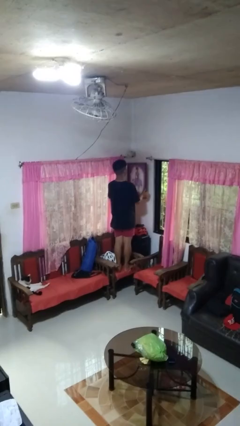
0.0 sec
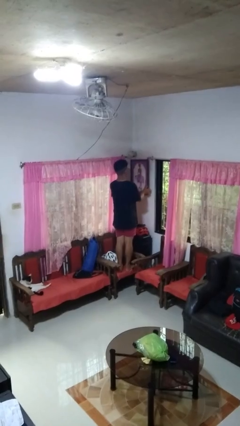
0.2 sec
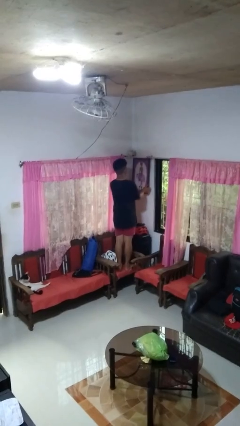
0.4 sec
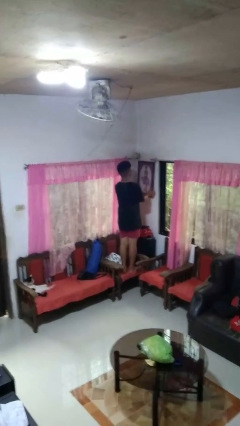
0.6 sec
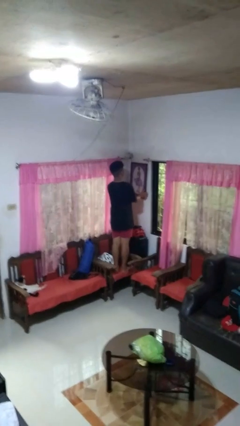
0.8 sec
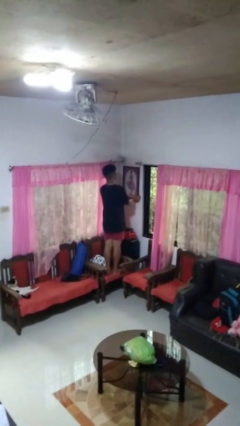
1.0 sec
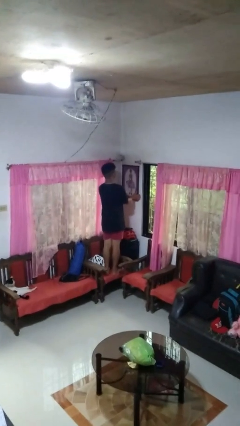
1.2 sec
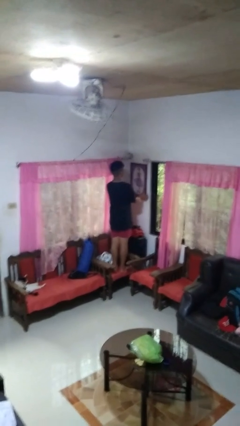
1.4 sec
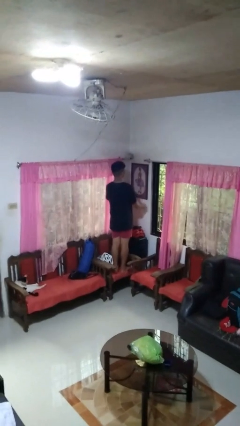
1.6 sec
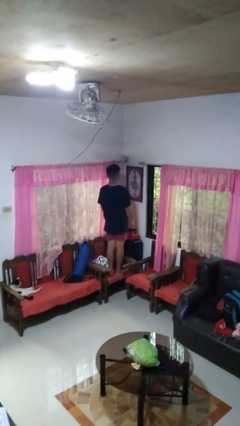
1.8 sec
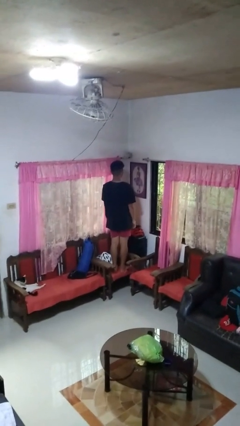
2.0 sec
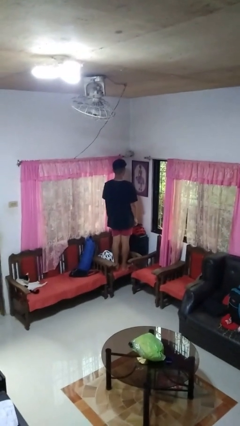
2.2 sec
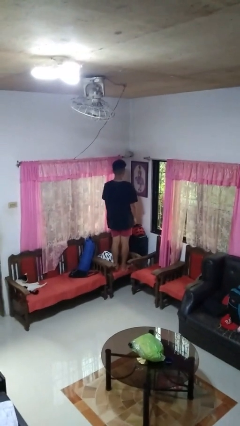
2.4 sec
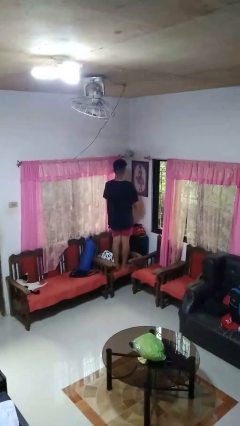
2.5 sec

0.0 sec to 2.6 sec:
person puts up picture frame

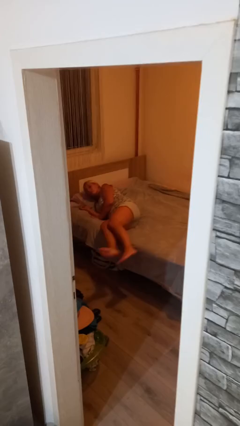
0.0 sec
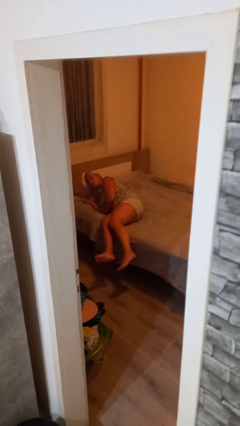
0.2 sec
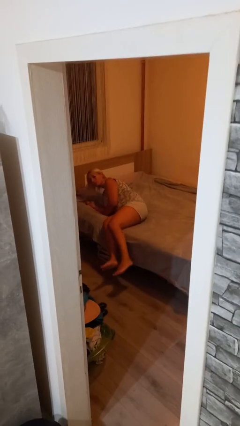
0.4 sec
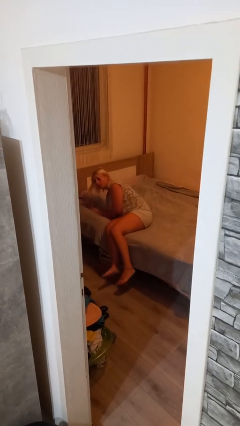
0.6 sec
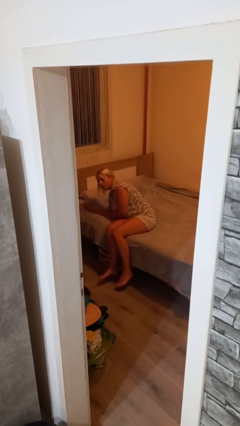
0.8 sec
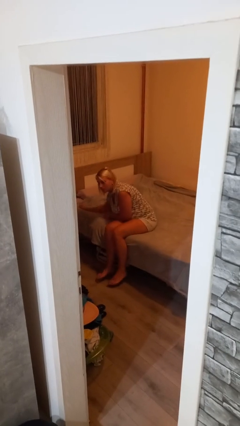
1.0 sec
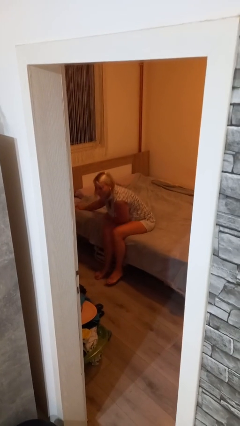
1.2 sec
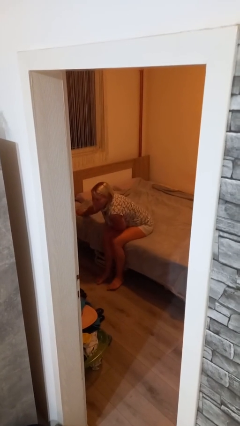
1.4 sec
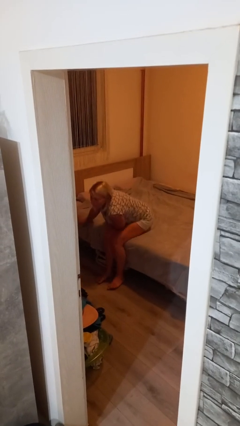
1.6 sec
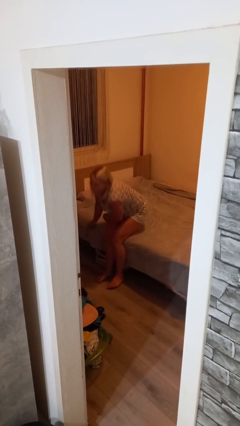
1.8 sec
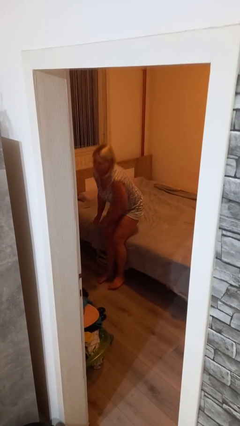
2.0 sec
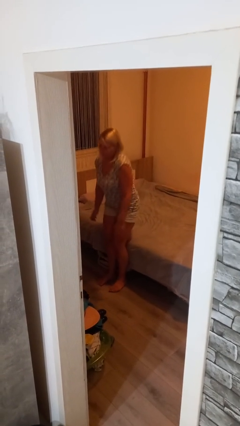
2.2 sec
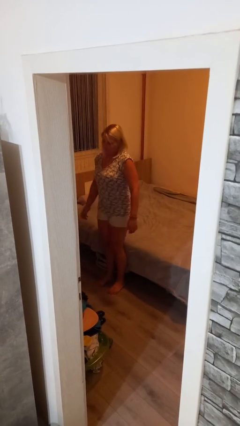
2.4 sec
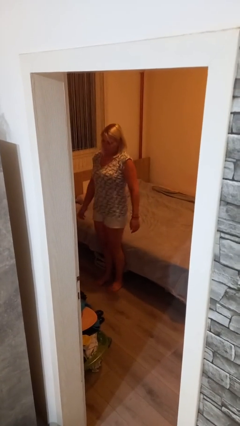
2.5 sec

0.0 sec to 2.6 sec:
person stands up

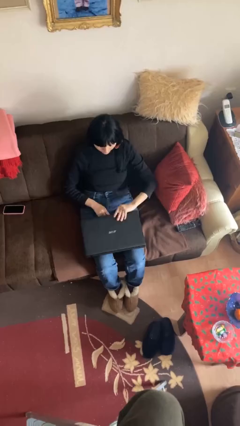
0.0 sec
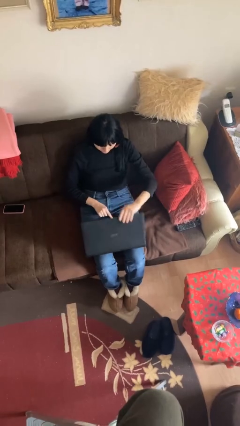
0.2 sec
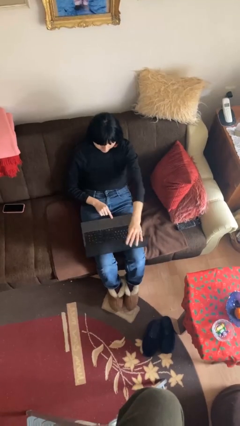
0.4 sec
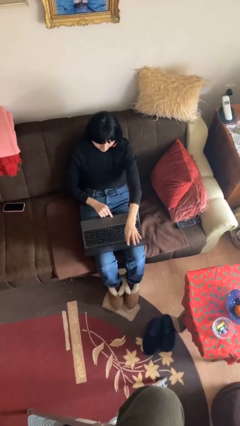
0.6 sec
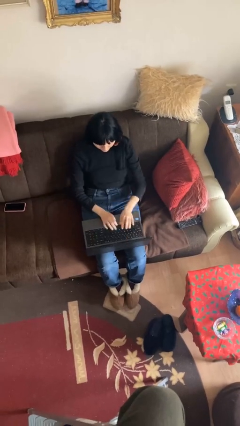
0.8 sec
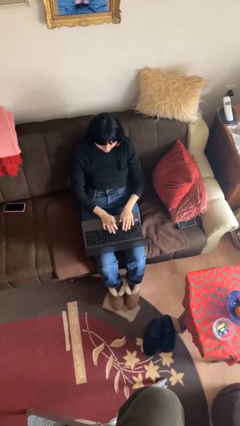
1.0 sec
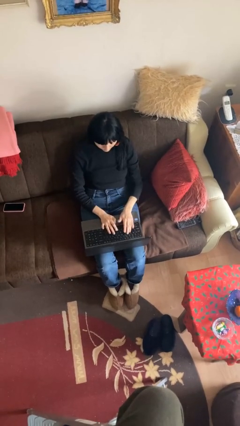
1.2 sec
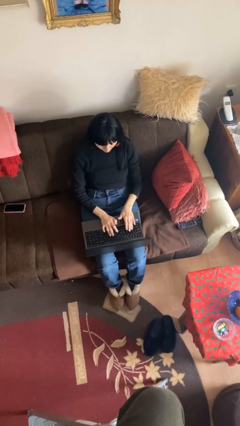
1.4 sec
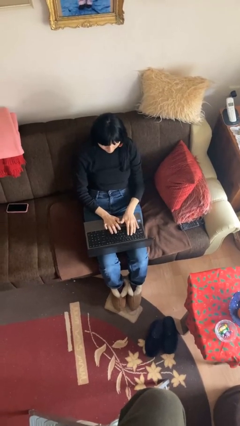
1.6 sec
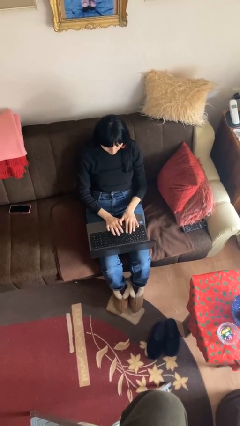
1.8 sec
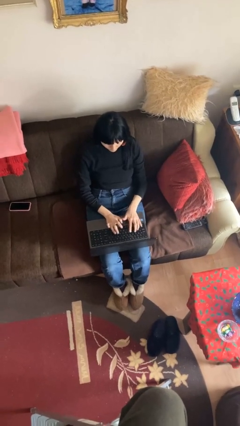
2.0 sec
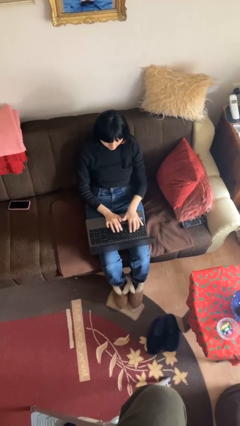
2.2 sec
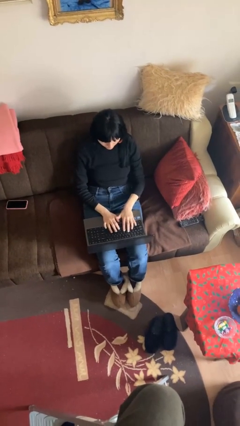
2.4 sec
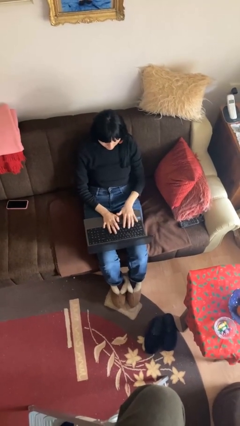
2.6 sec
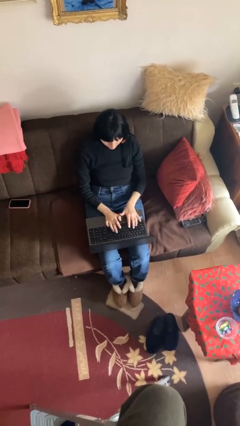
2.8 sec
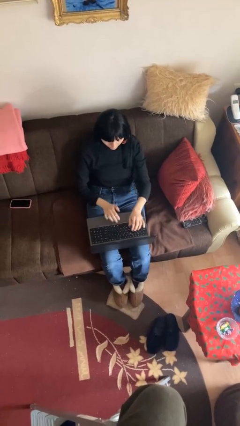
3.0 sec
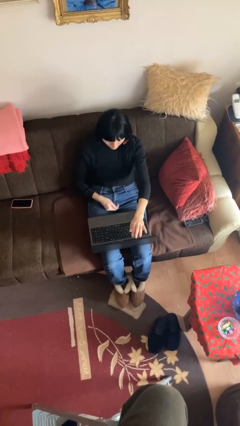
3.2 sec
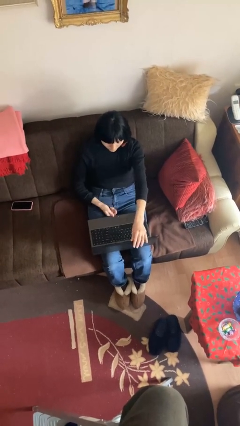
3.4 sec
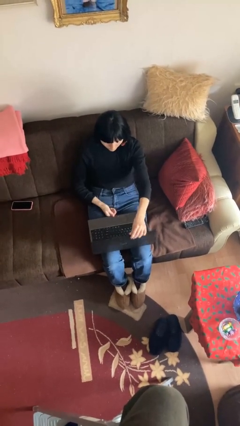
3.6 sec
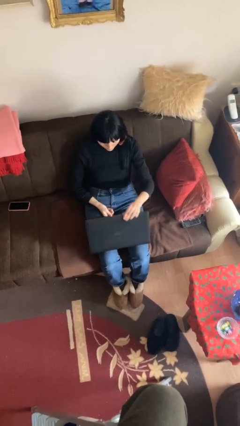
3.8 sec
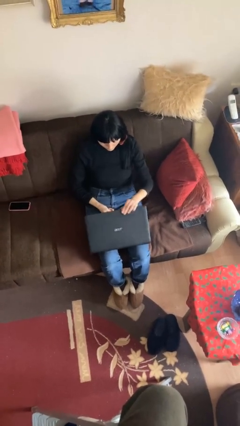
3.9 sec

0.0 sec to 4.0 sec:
person interacts with laptop

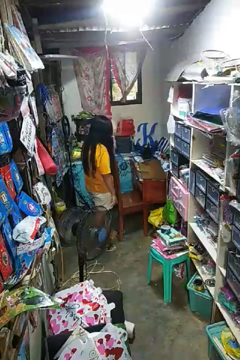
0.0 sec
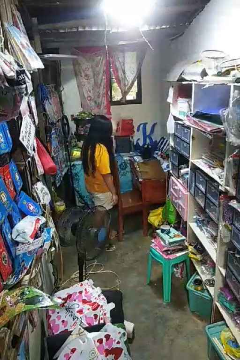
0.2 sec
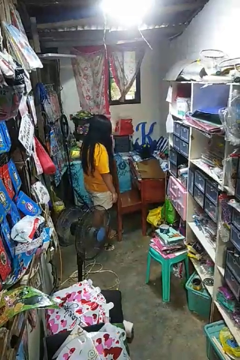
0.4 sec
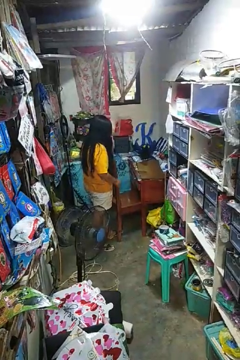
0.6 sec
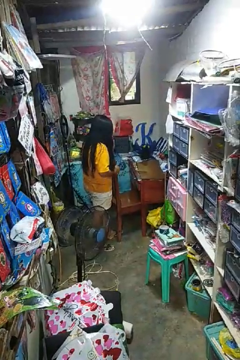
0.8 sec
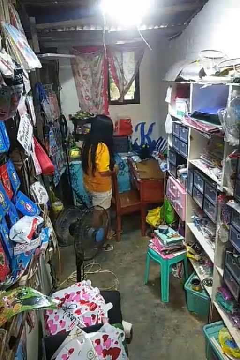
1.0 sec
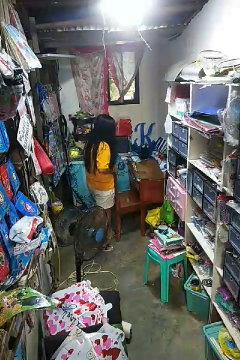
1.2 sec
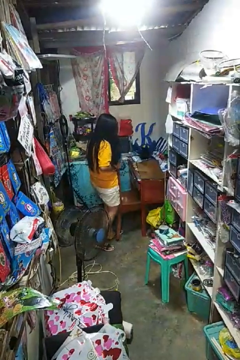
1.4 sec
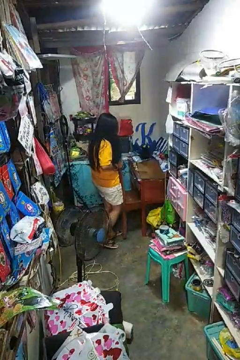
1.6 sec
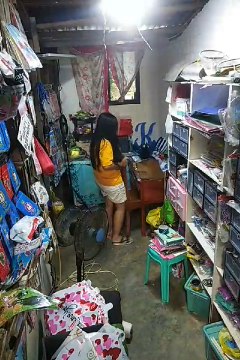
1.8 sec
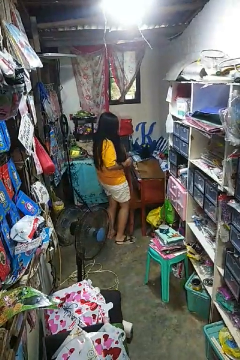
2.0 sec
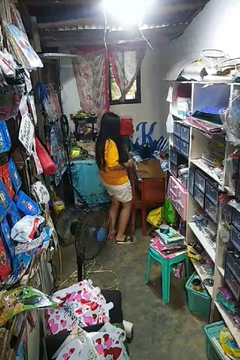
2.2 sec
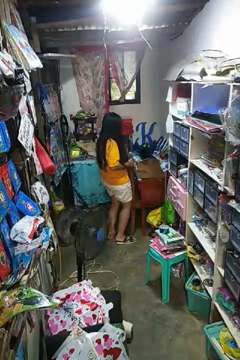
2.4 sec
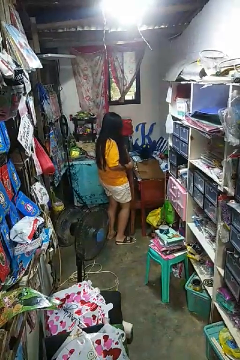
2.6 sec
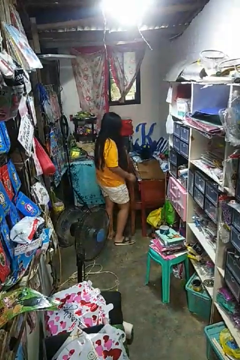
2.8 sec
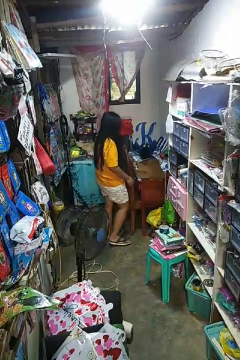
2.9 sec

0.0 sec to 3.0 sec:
person pushes in chair

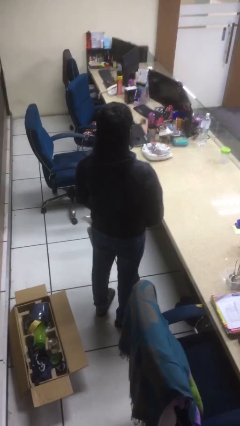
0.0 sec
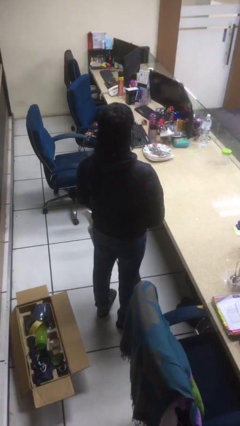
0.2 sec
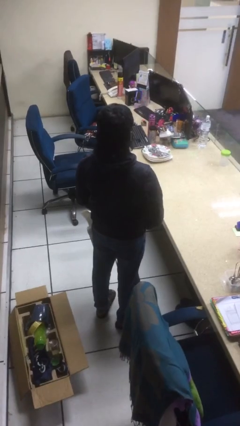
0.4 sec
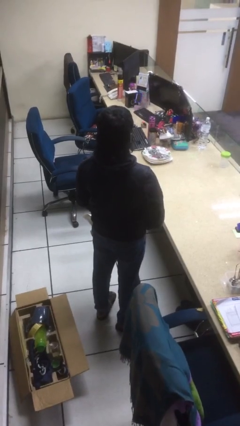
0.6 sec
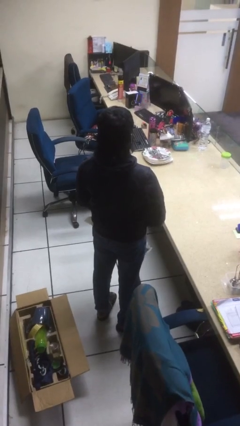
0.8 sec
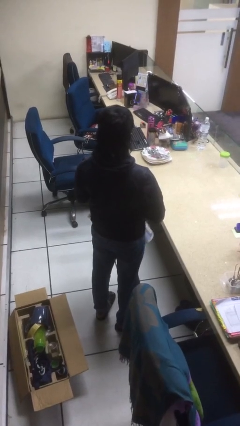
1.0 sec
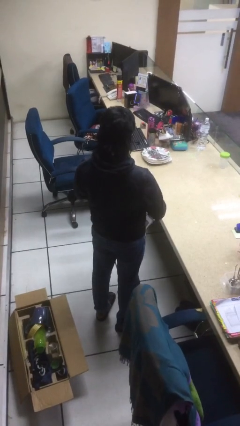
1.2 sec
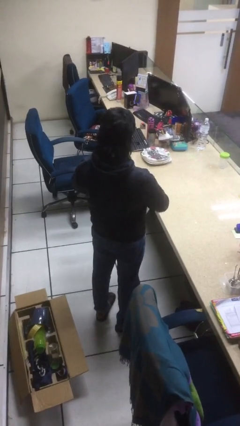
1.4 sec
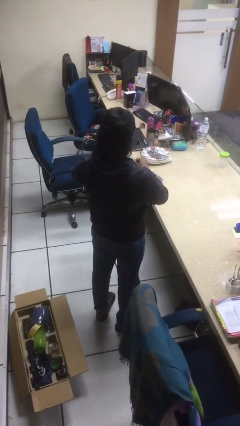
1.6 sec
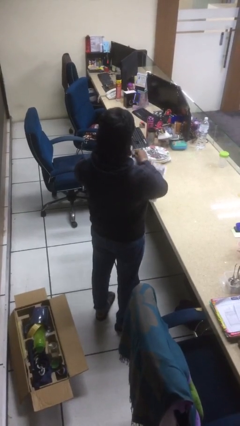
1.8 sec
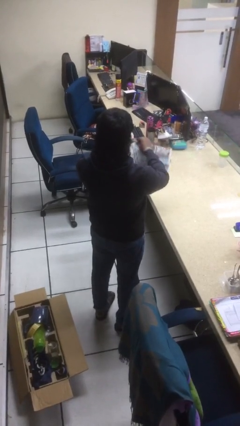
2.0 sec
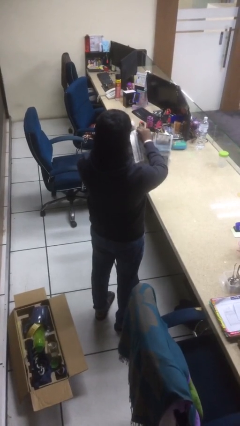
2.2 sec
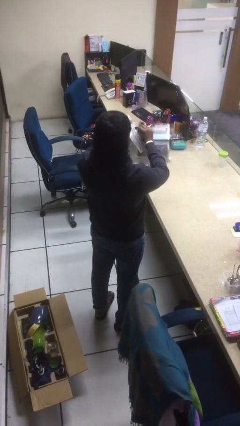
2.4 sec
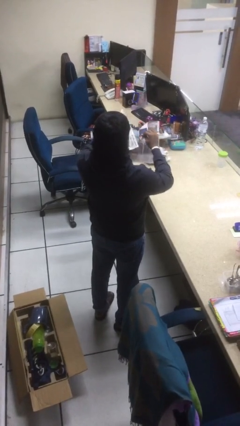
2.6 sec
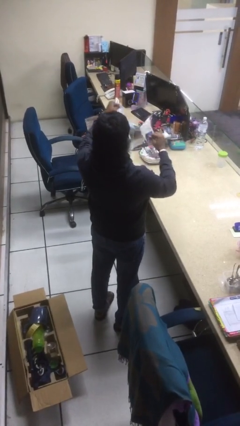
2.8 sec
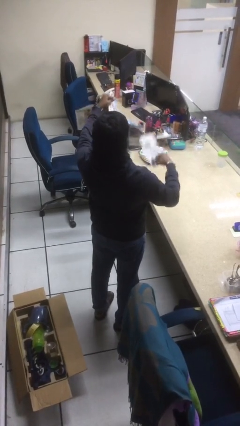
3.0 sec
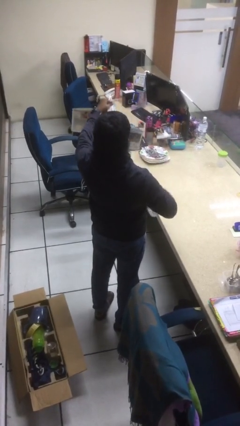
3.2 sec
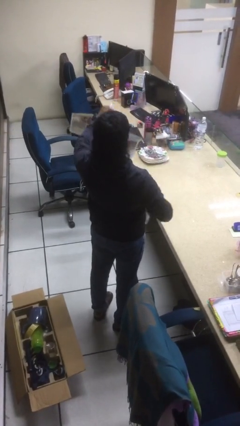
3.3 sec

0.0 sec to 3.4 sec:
person tears paper

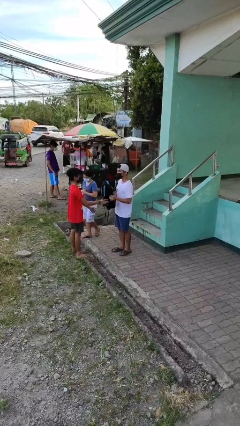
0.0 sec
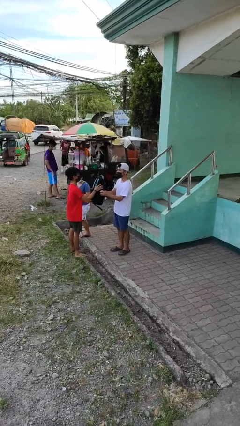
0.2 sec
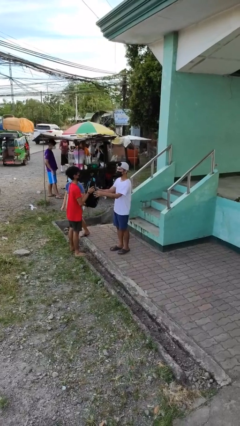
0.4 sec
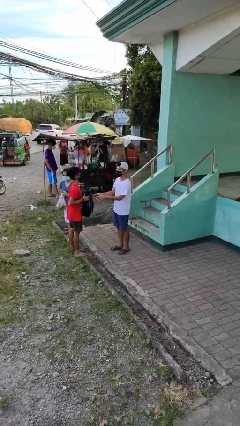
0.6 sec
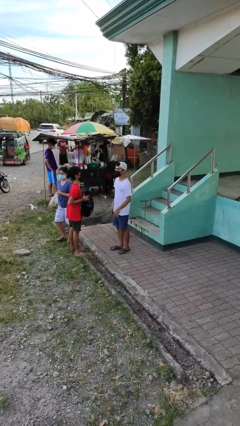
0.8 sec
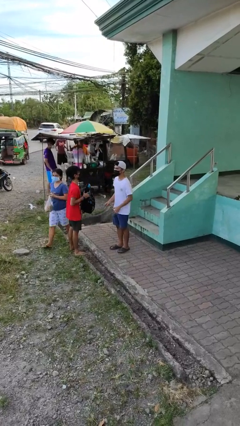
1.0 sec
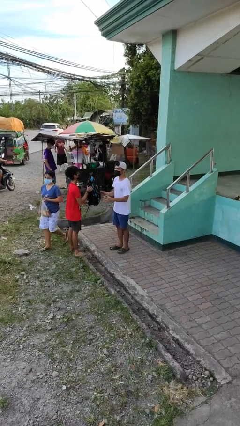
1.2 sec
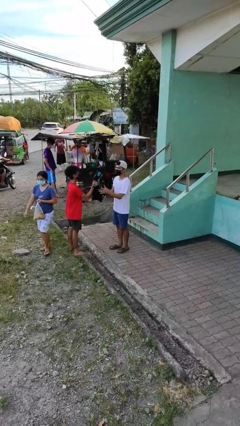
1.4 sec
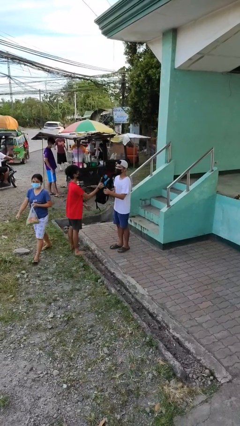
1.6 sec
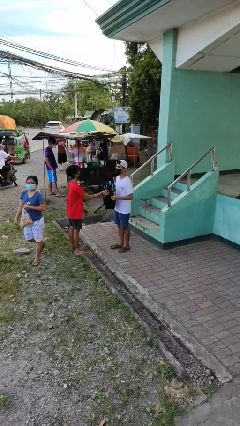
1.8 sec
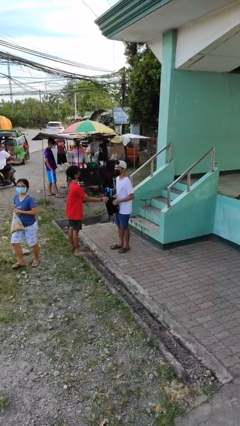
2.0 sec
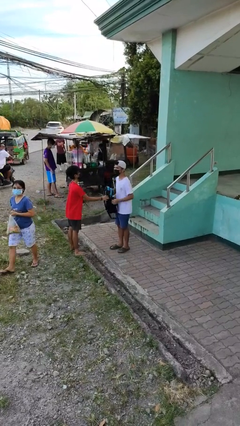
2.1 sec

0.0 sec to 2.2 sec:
person transfers object to person
